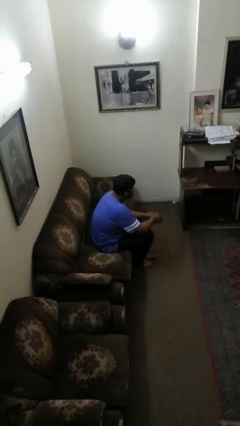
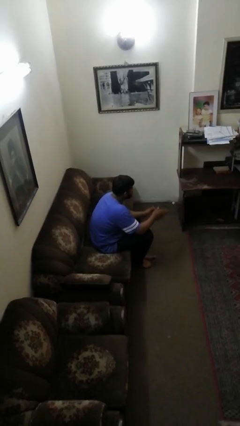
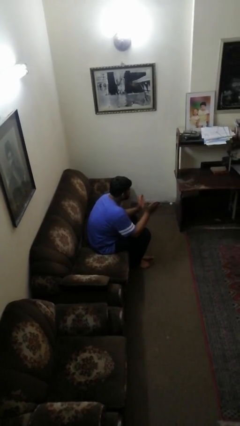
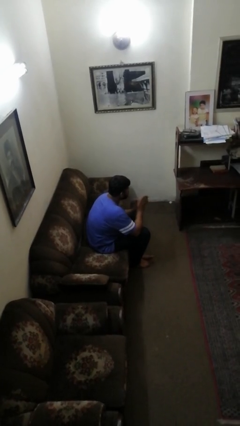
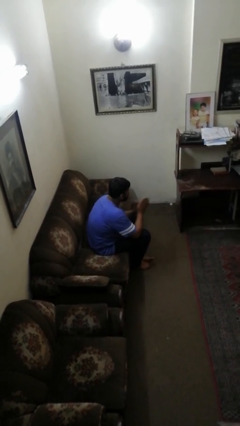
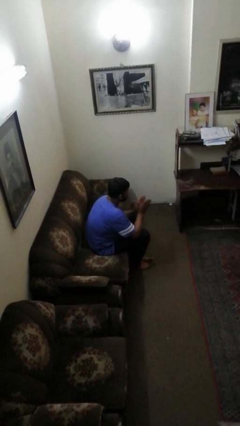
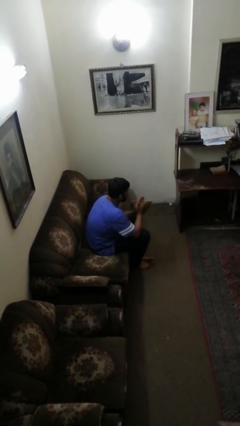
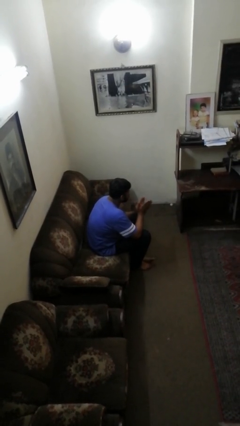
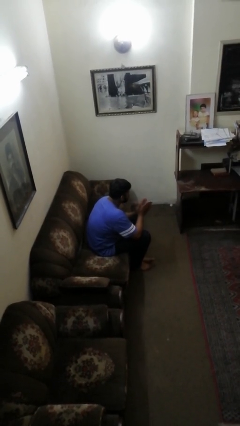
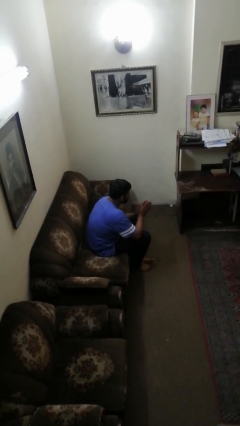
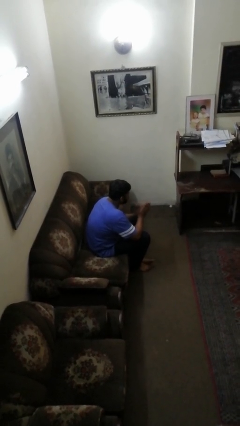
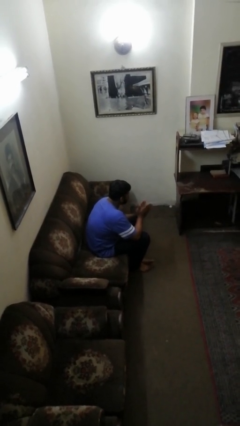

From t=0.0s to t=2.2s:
person claps hands

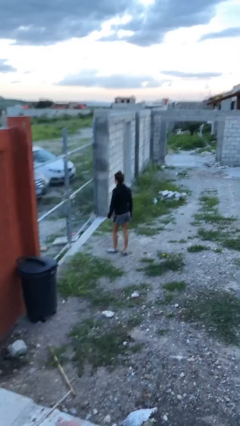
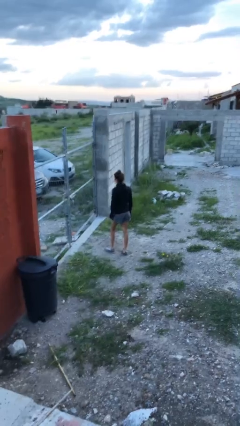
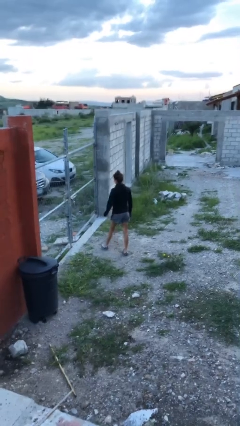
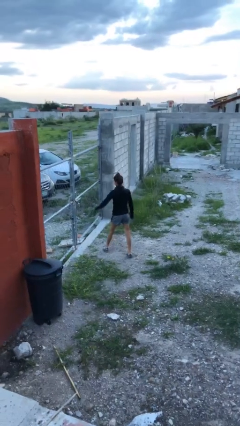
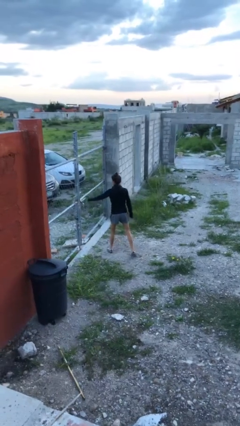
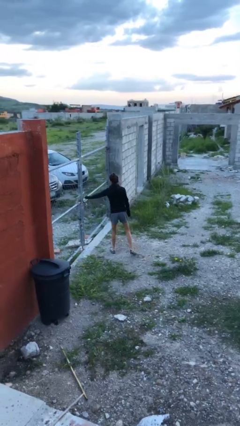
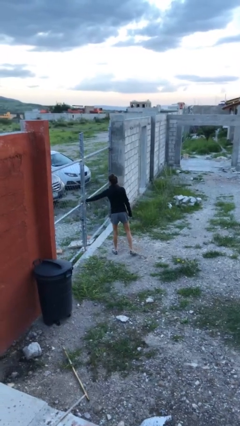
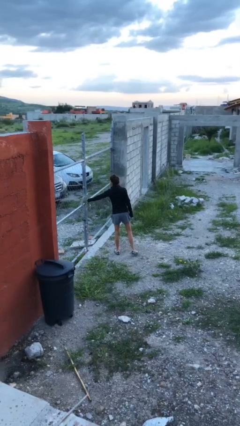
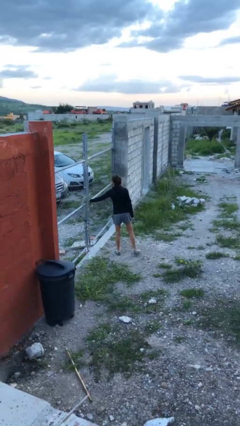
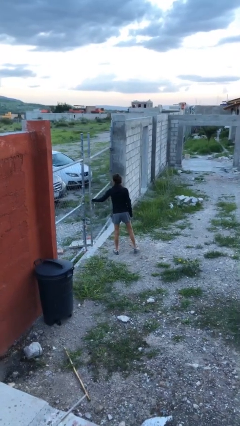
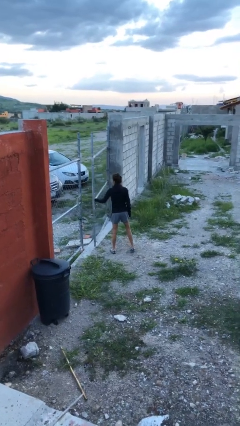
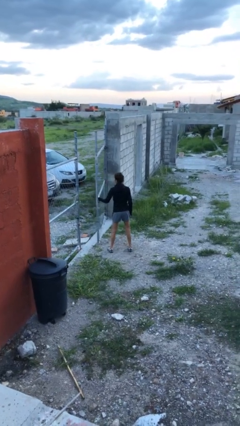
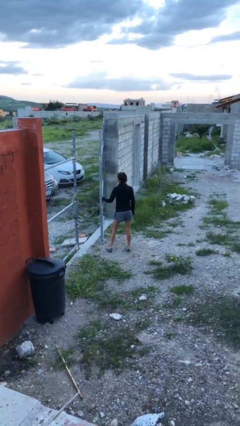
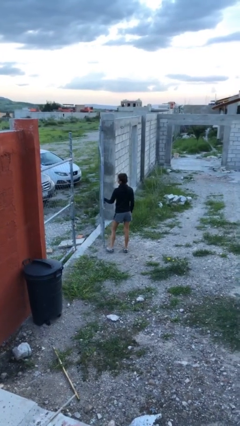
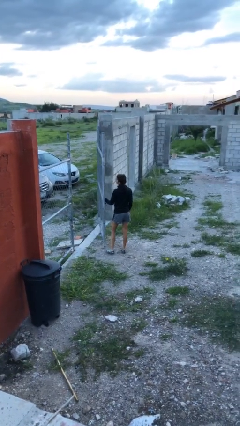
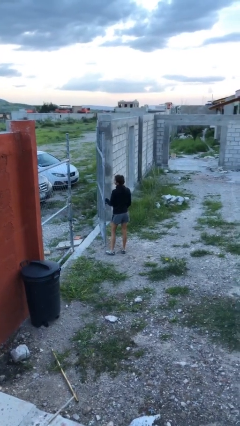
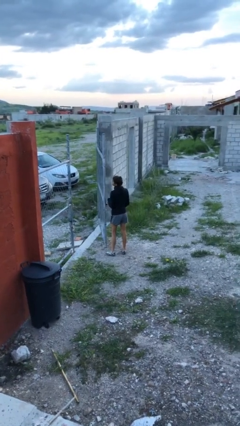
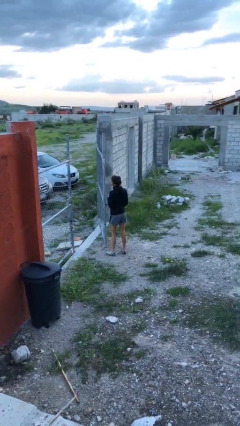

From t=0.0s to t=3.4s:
person opens gate

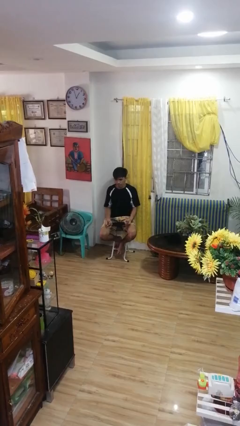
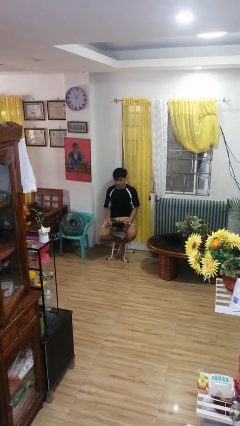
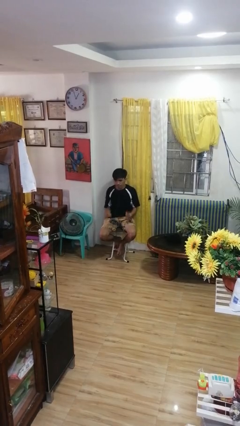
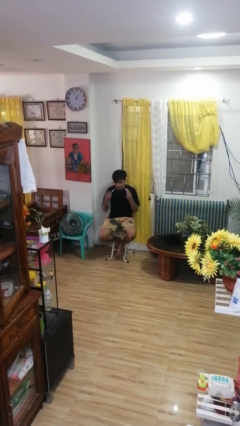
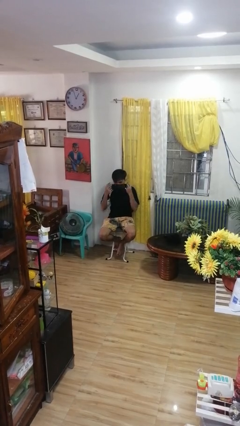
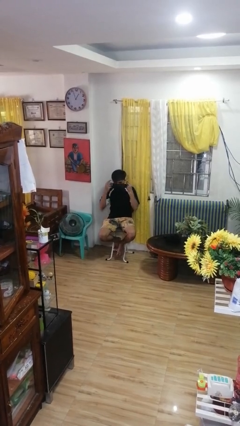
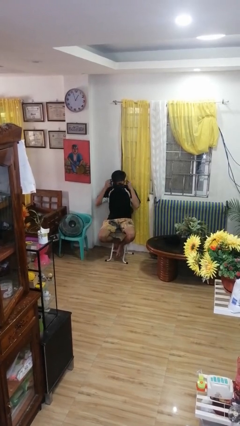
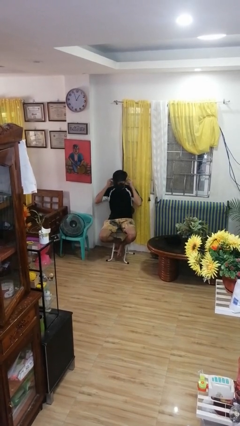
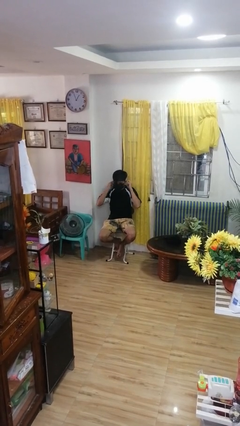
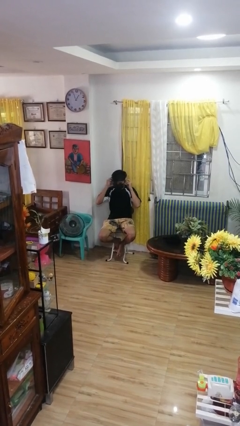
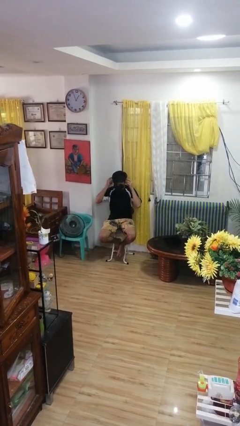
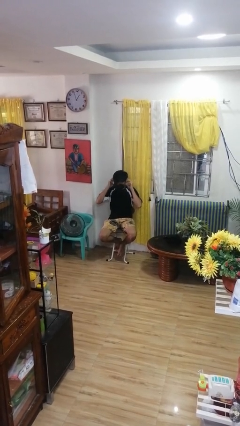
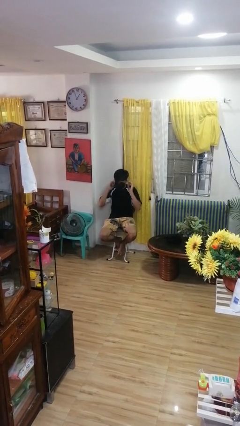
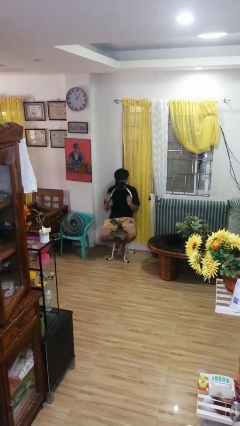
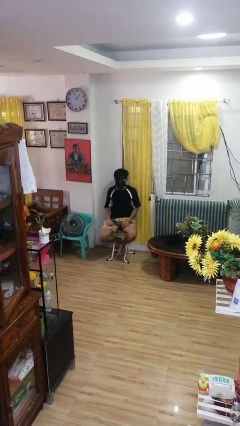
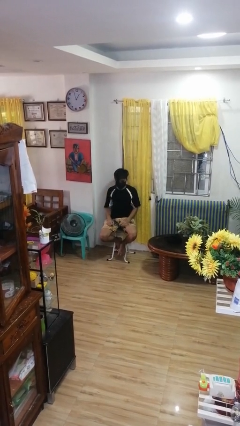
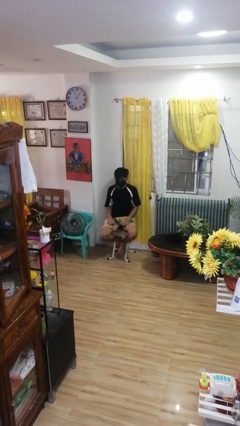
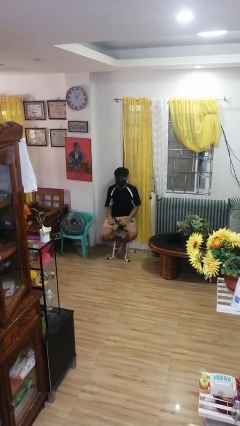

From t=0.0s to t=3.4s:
person puts on facemask

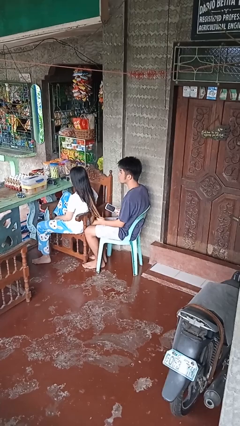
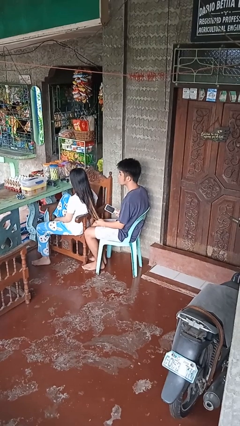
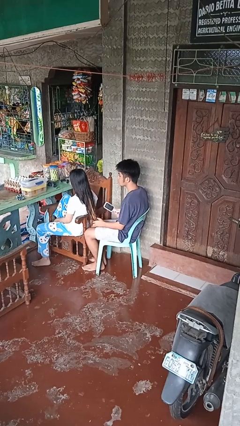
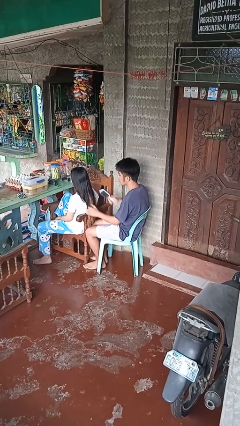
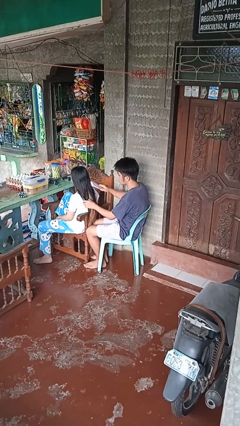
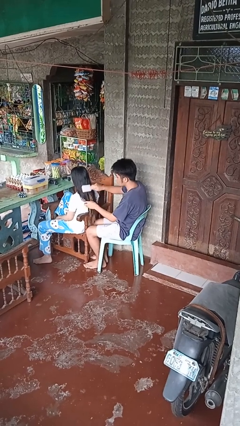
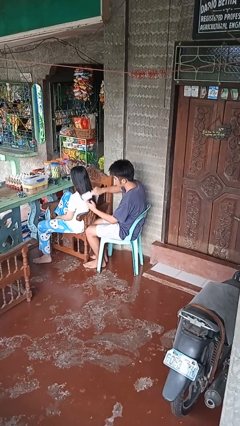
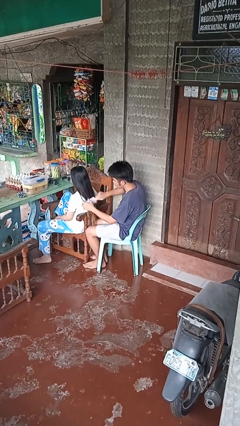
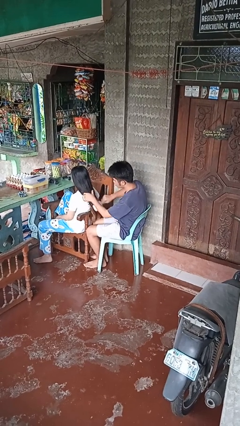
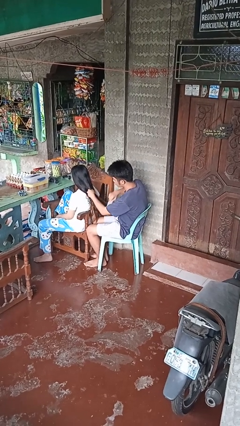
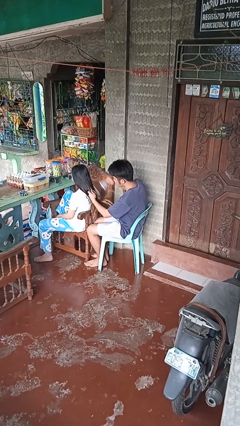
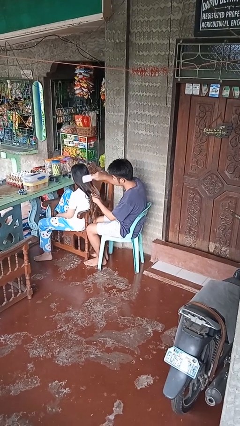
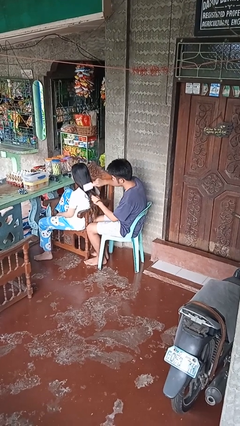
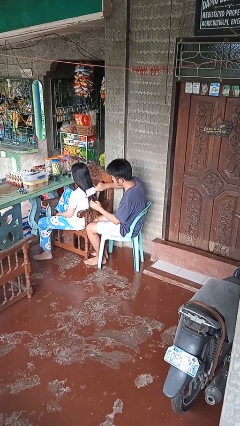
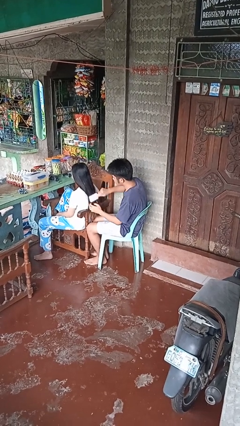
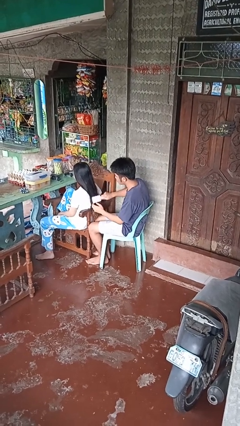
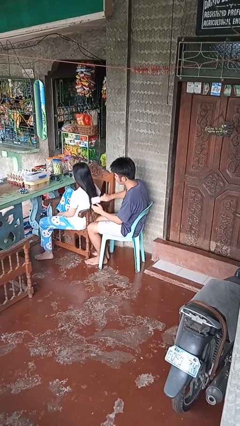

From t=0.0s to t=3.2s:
person brushes hair of person

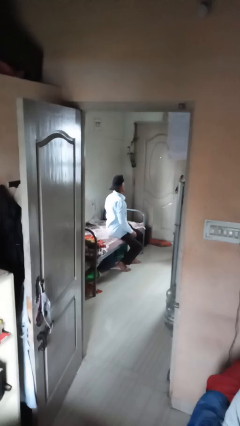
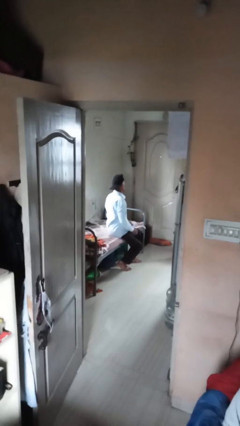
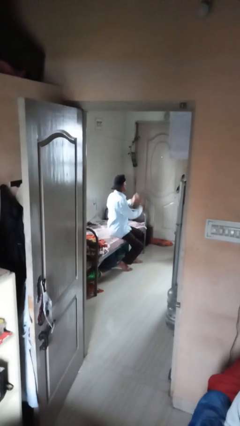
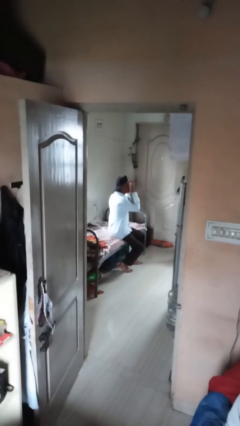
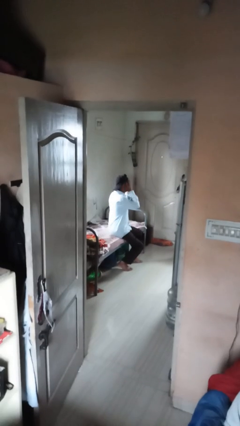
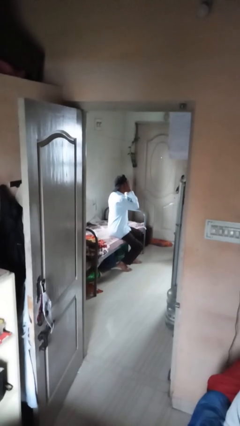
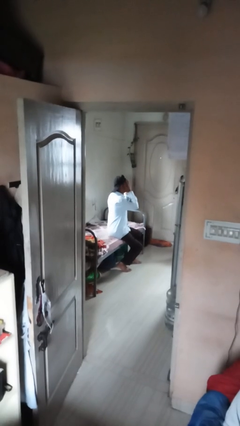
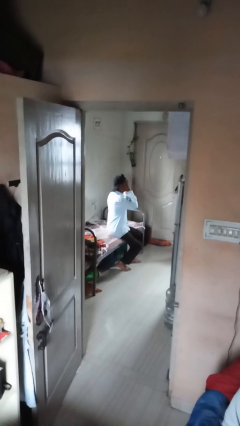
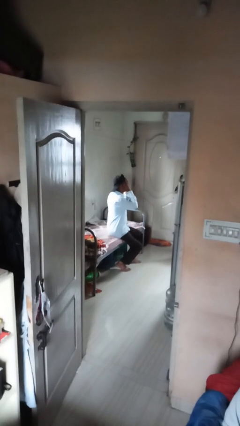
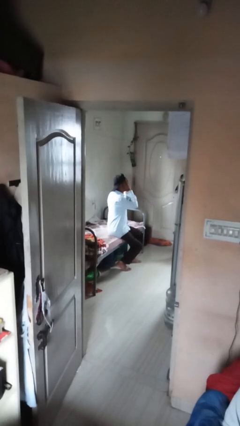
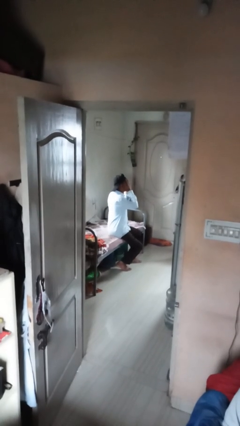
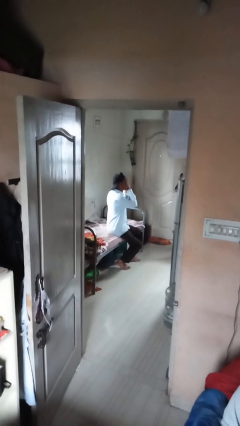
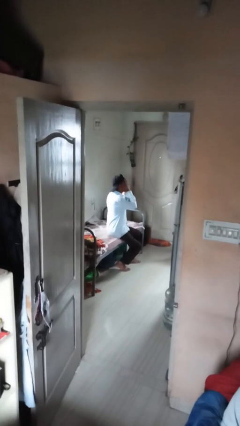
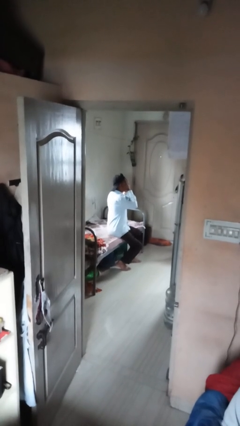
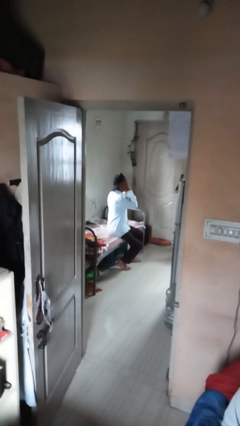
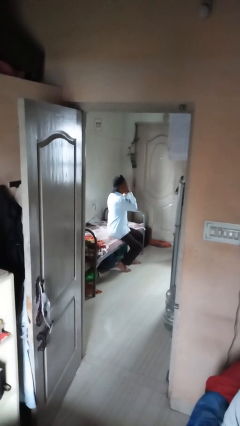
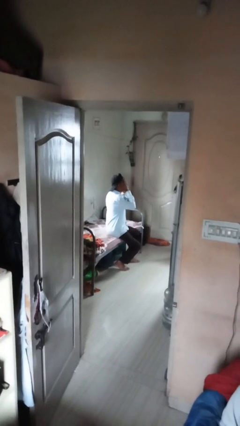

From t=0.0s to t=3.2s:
person covers face with hands

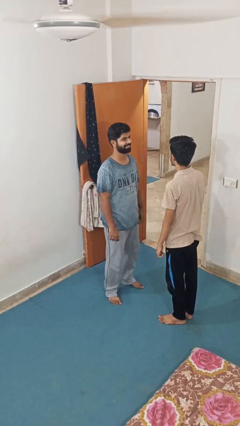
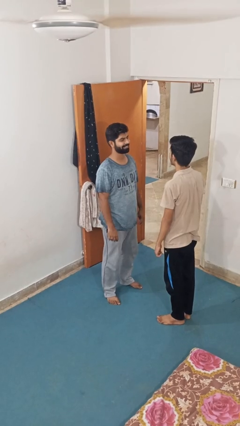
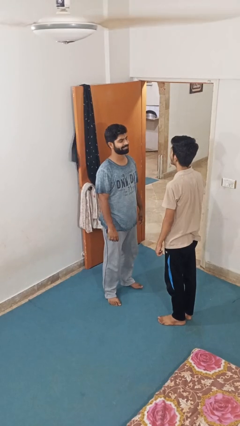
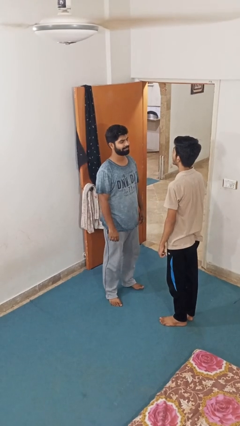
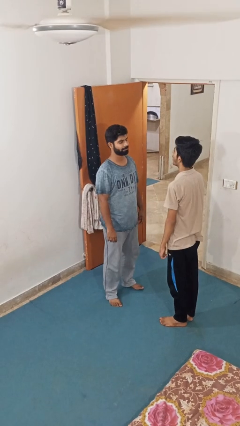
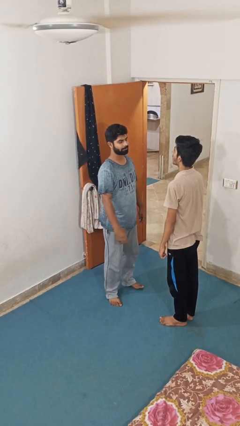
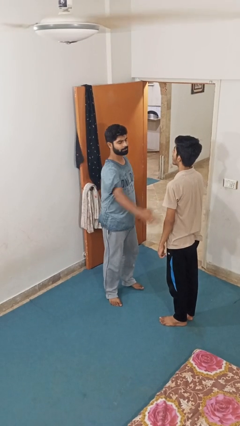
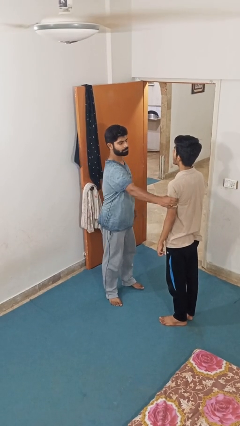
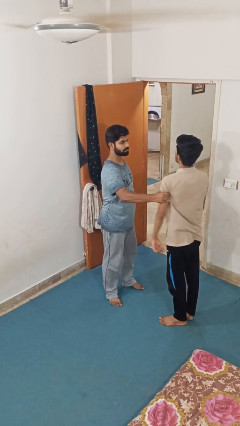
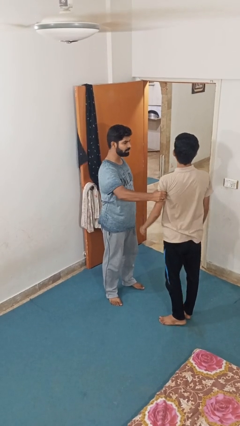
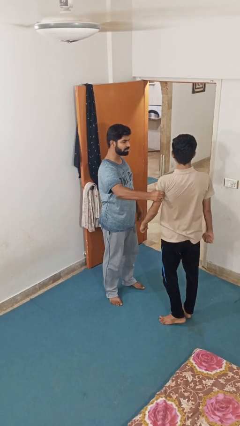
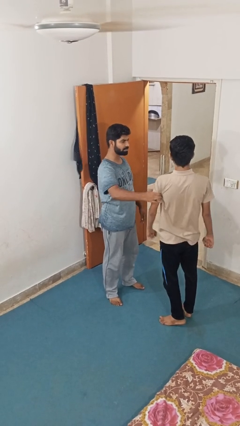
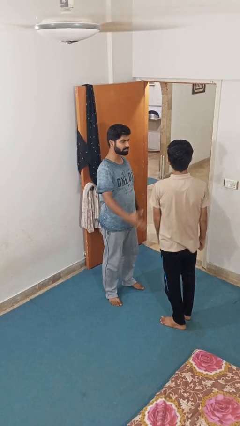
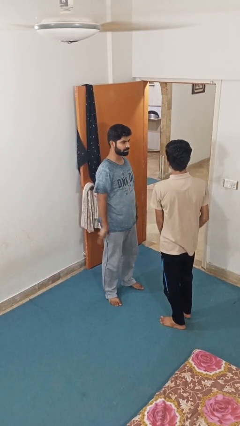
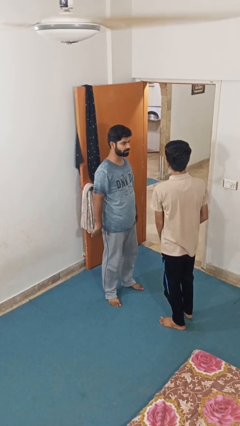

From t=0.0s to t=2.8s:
person grabs person by bicep
